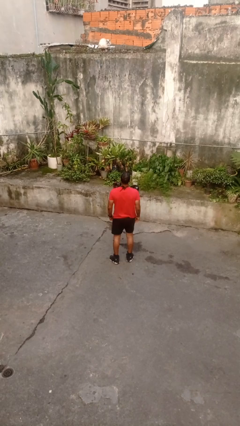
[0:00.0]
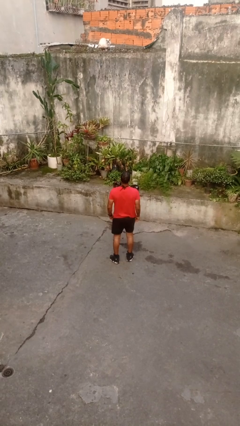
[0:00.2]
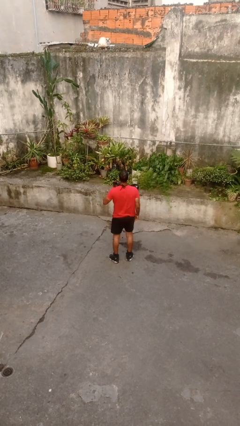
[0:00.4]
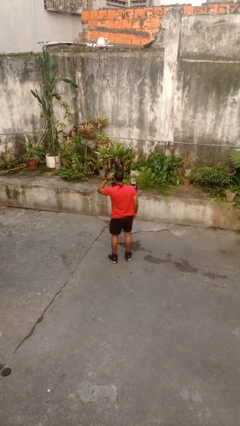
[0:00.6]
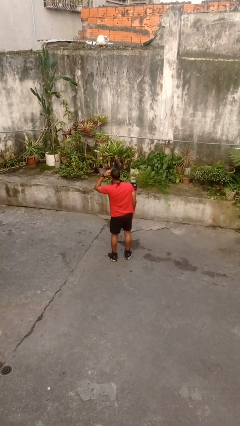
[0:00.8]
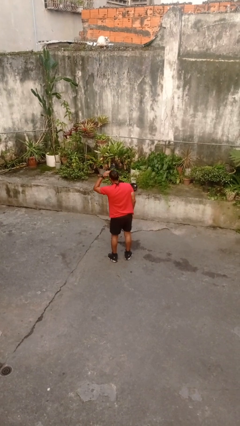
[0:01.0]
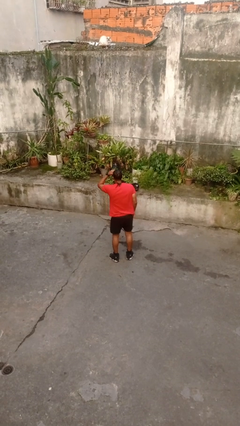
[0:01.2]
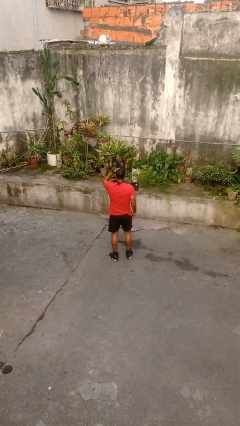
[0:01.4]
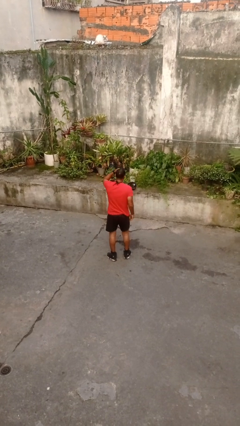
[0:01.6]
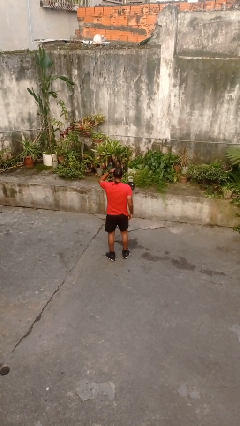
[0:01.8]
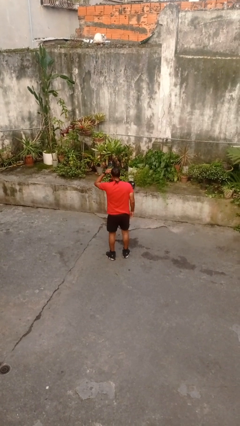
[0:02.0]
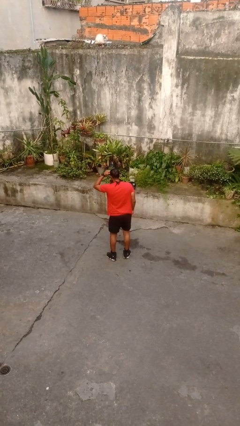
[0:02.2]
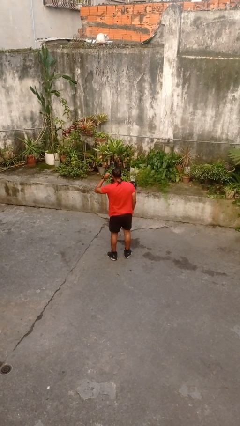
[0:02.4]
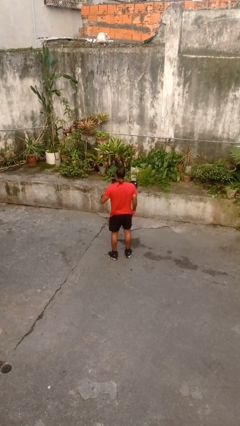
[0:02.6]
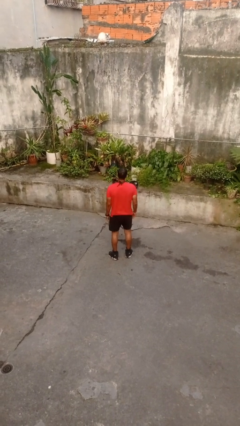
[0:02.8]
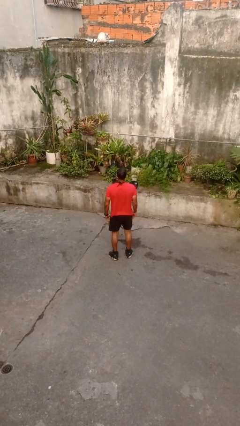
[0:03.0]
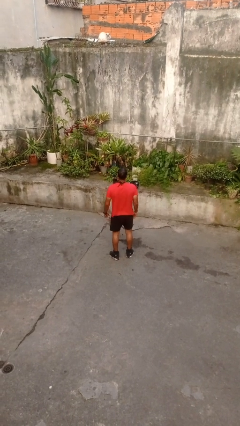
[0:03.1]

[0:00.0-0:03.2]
person shades eyes

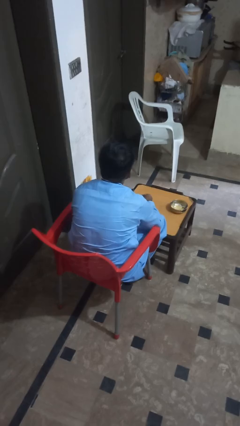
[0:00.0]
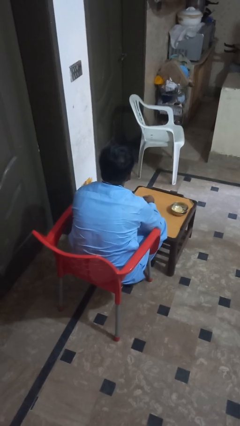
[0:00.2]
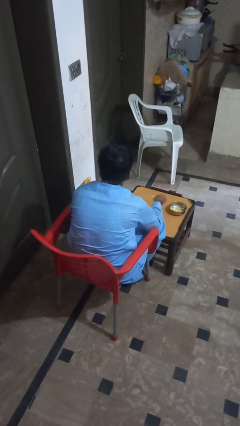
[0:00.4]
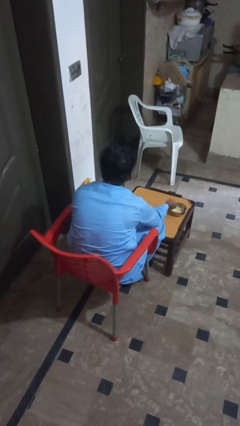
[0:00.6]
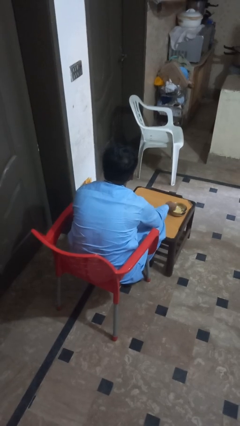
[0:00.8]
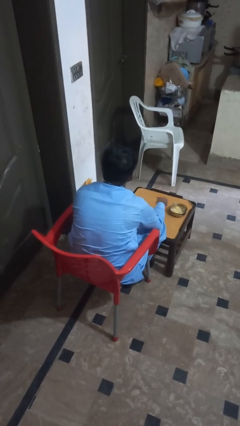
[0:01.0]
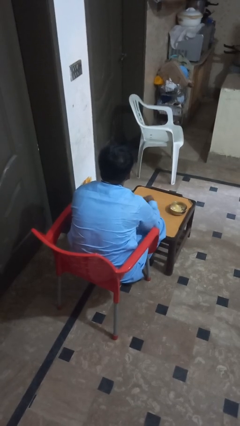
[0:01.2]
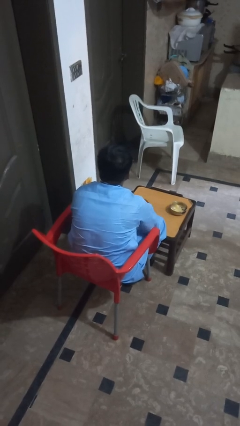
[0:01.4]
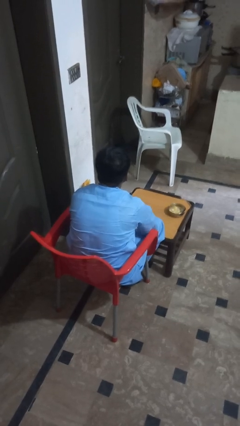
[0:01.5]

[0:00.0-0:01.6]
person pours into bowl

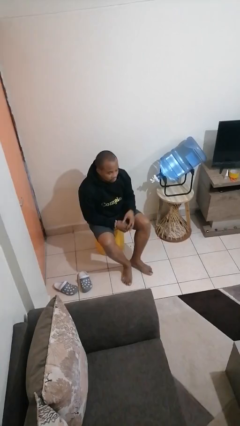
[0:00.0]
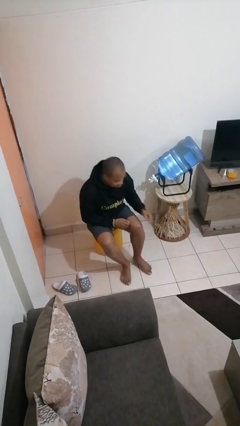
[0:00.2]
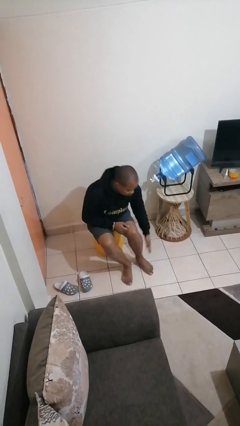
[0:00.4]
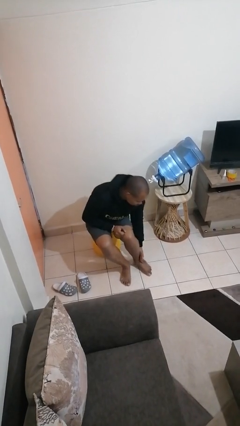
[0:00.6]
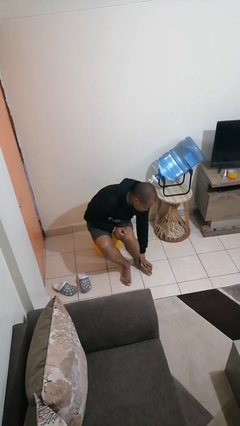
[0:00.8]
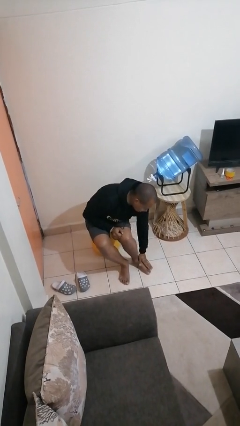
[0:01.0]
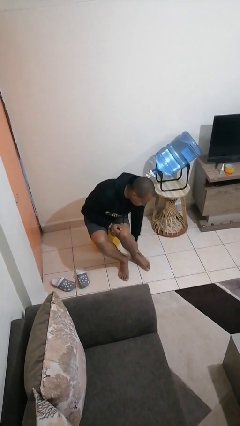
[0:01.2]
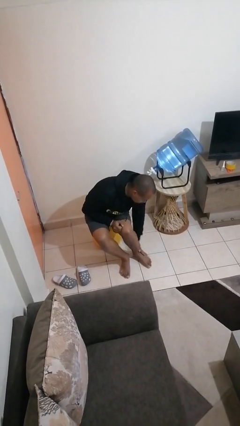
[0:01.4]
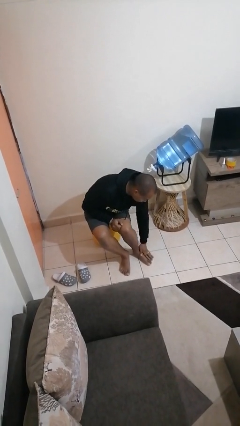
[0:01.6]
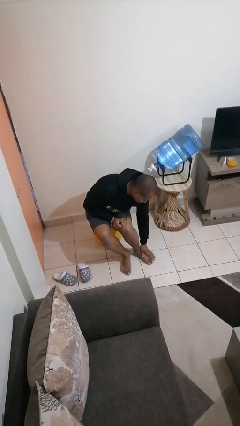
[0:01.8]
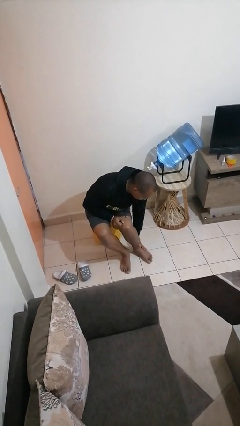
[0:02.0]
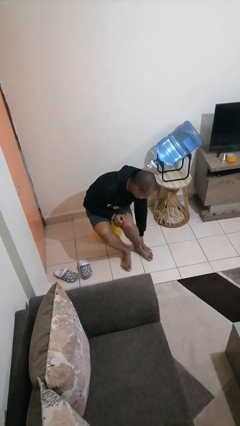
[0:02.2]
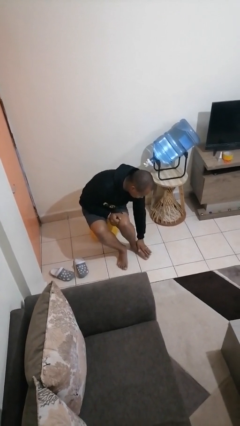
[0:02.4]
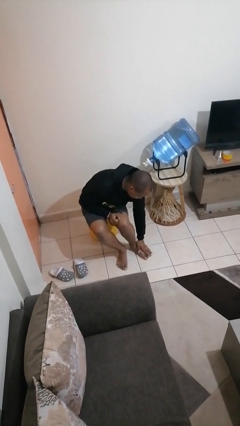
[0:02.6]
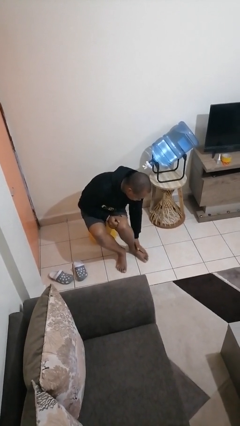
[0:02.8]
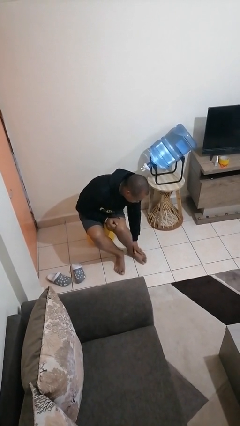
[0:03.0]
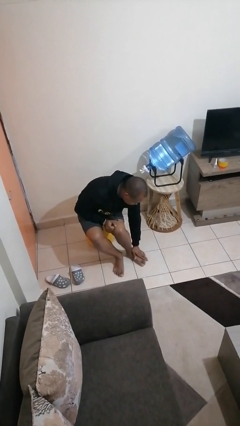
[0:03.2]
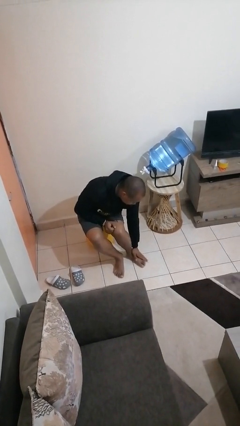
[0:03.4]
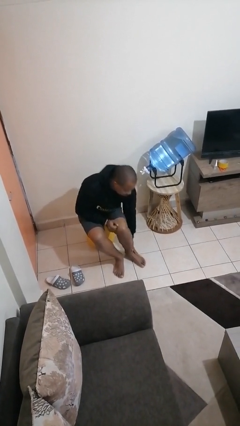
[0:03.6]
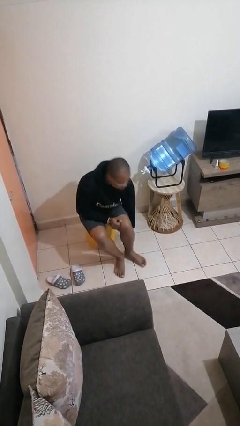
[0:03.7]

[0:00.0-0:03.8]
person rubs foot

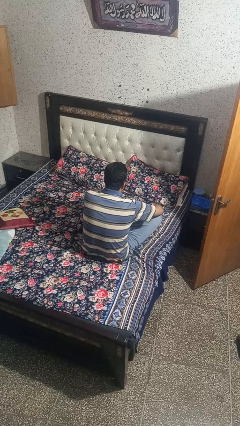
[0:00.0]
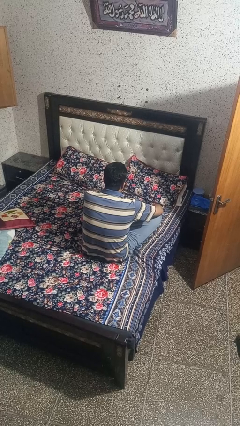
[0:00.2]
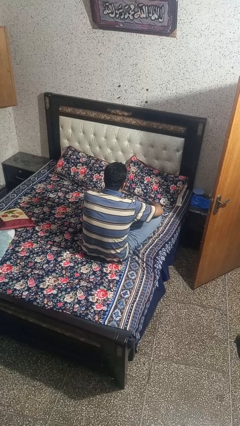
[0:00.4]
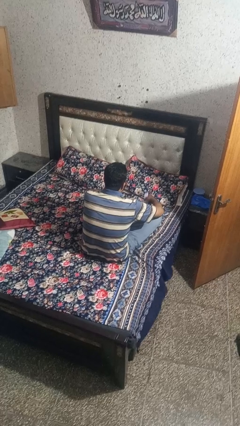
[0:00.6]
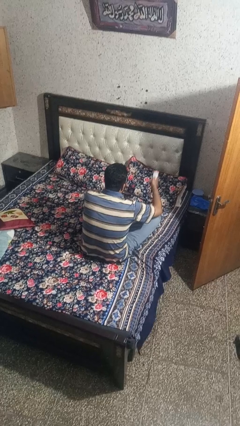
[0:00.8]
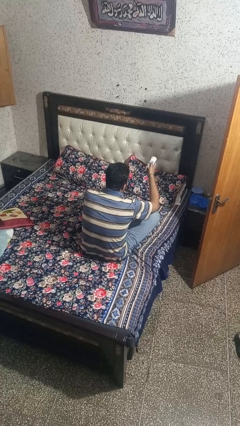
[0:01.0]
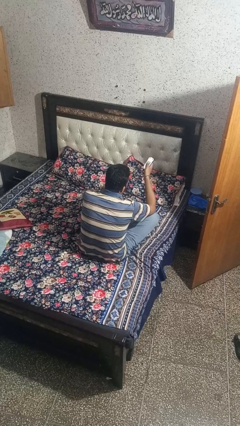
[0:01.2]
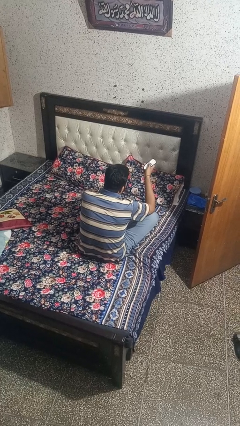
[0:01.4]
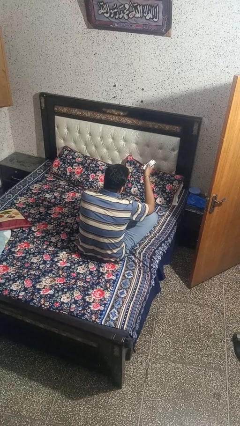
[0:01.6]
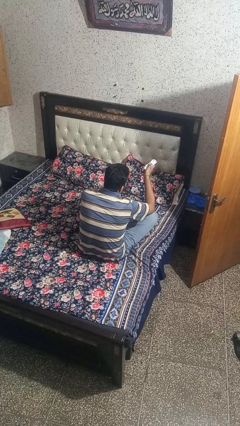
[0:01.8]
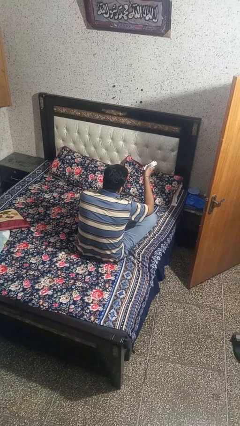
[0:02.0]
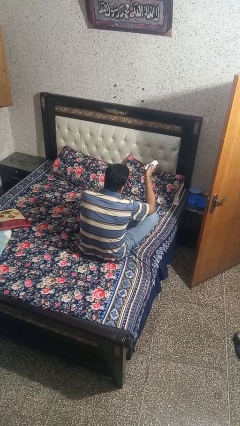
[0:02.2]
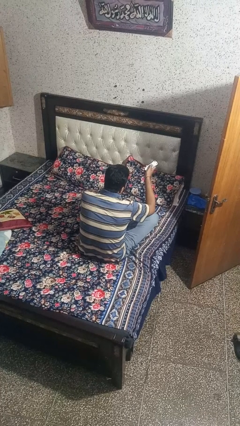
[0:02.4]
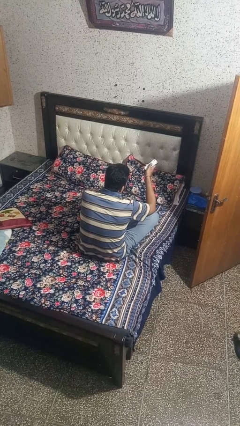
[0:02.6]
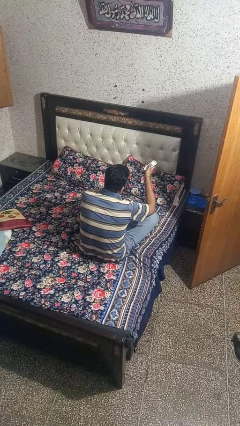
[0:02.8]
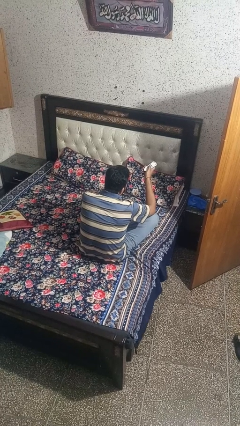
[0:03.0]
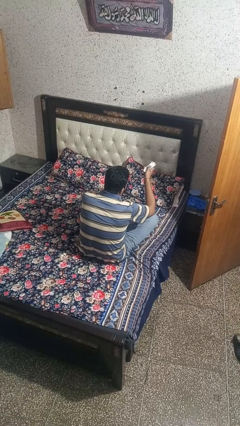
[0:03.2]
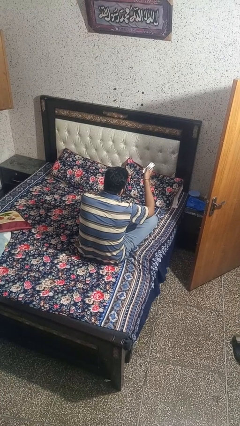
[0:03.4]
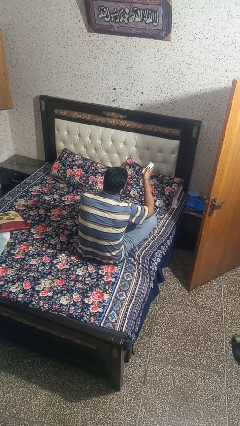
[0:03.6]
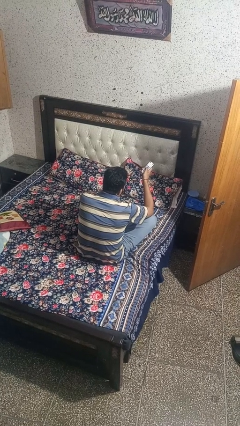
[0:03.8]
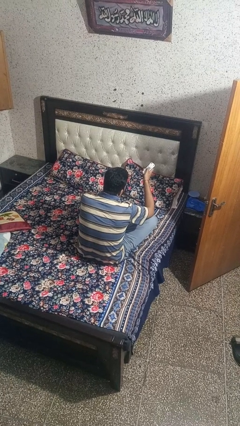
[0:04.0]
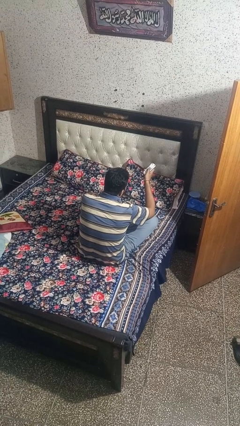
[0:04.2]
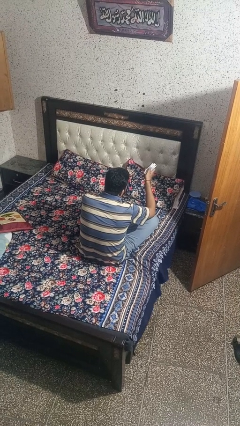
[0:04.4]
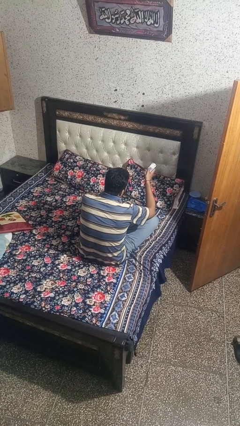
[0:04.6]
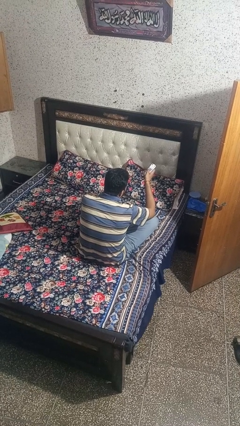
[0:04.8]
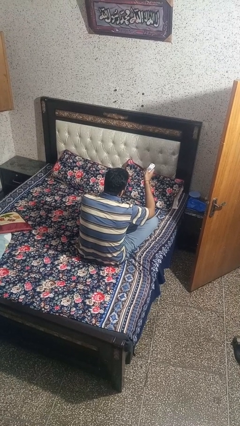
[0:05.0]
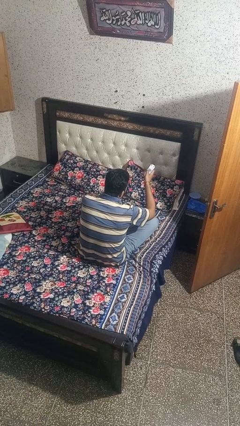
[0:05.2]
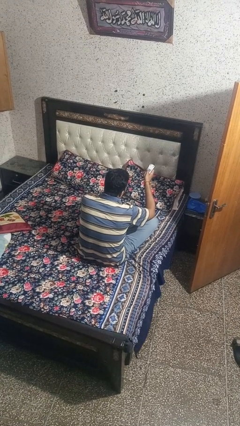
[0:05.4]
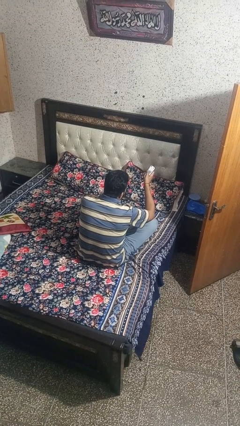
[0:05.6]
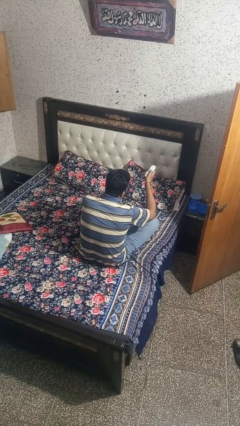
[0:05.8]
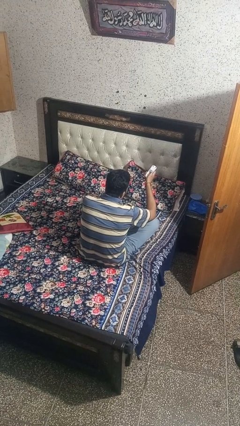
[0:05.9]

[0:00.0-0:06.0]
person uses television remote

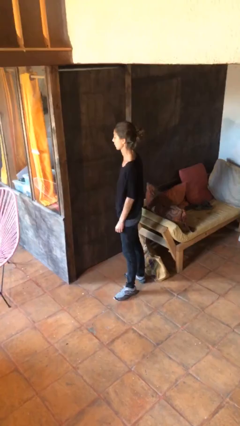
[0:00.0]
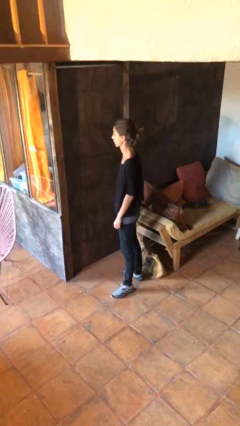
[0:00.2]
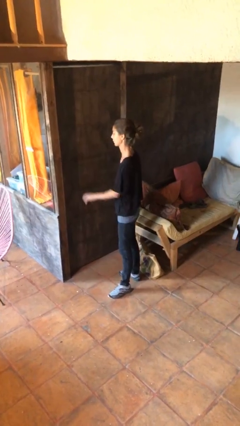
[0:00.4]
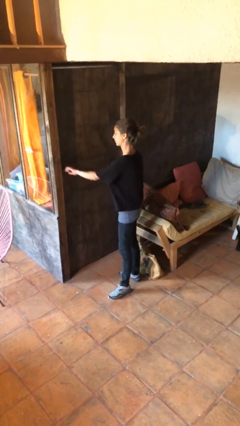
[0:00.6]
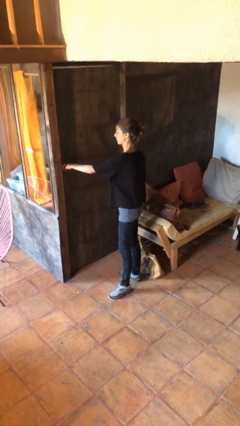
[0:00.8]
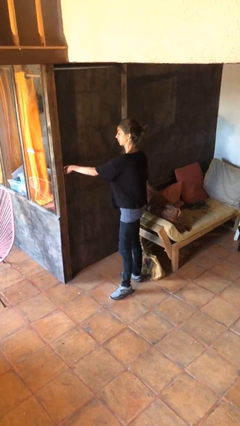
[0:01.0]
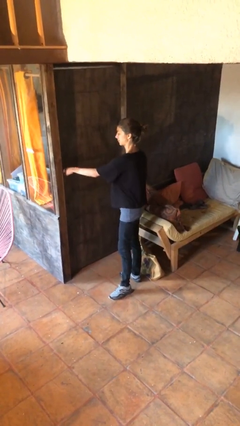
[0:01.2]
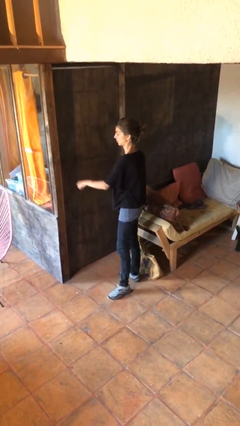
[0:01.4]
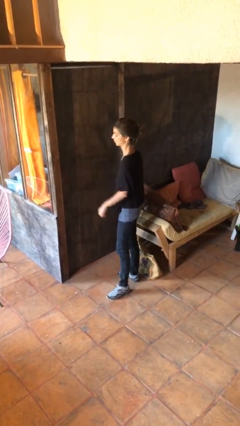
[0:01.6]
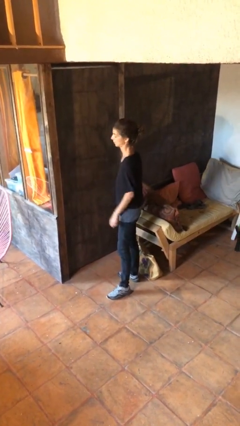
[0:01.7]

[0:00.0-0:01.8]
person locks door with keys

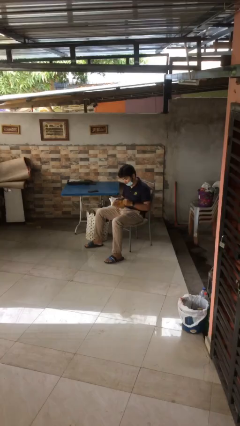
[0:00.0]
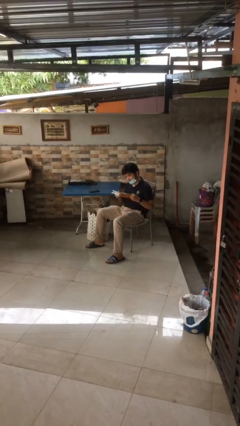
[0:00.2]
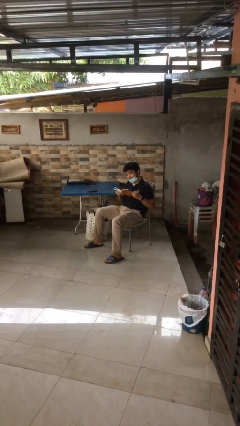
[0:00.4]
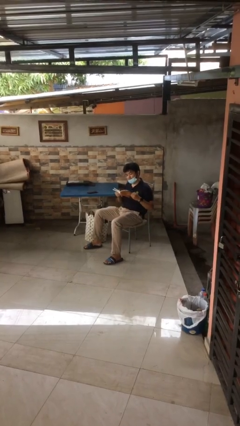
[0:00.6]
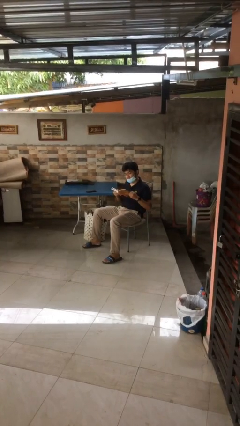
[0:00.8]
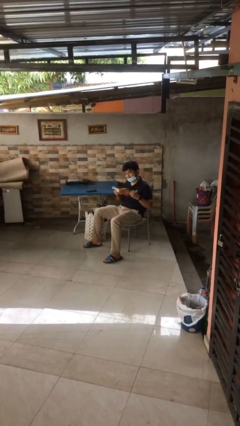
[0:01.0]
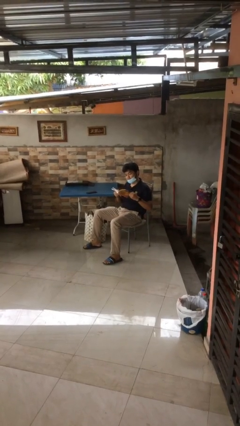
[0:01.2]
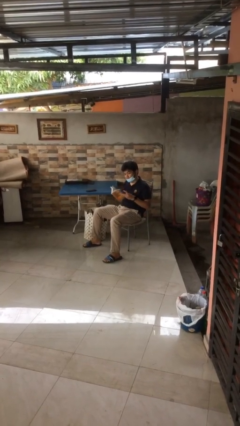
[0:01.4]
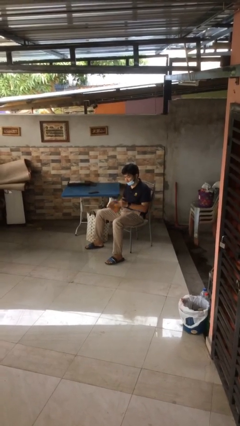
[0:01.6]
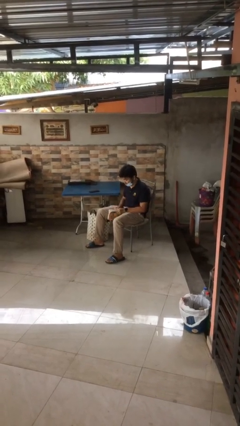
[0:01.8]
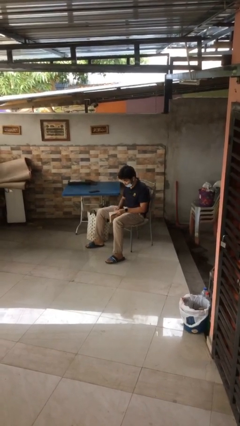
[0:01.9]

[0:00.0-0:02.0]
person reads book
